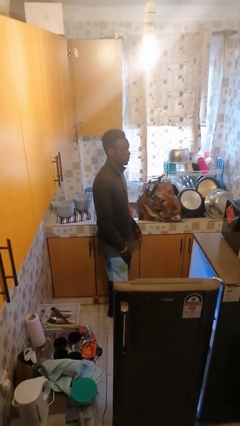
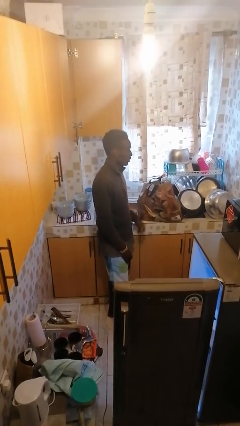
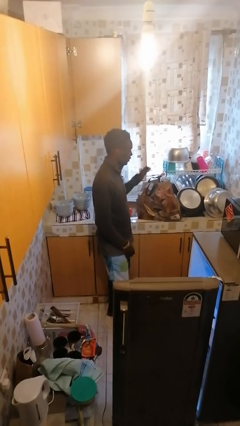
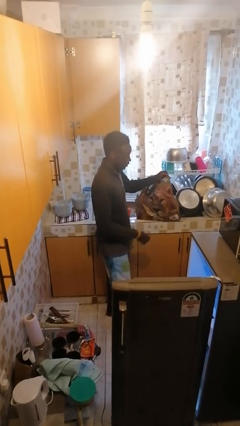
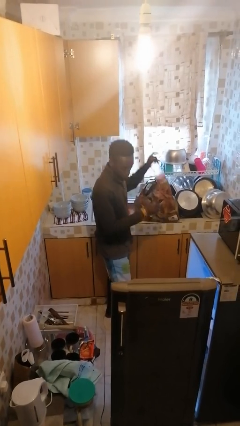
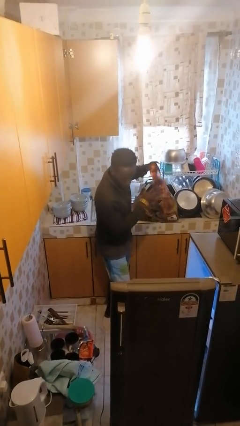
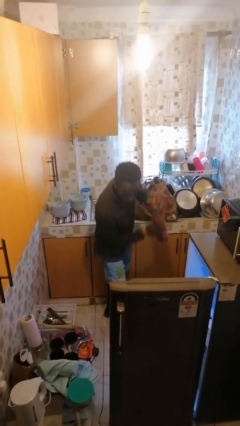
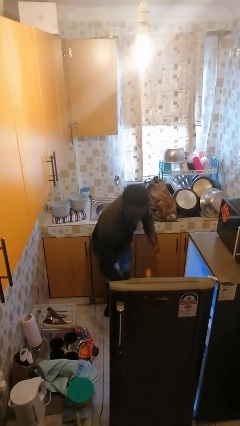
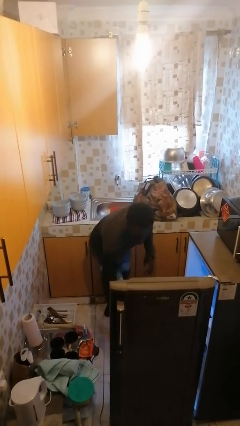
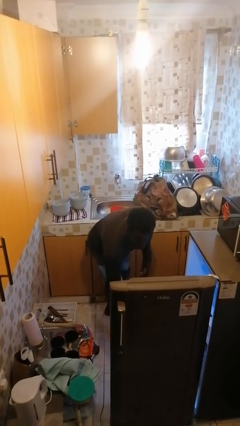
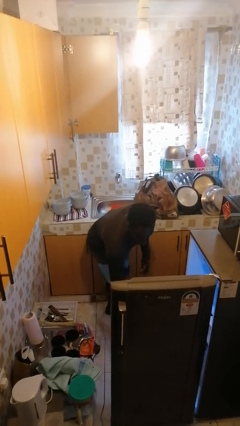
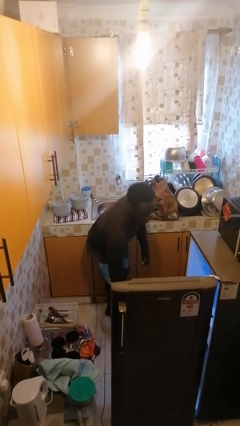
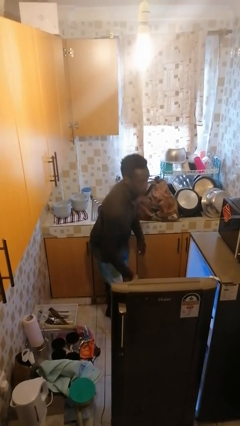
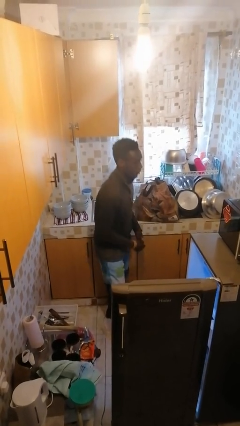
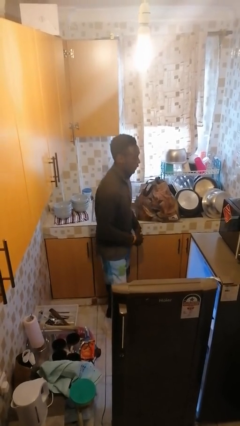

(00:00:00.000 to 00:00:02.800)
person loads groceries into refrigerator

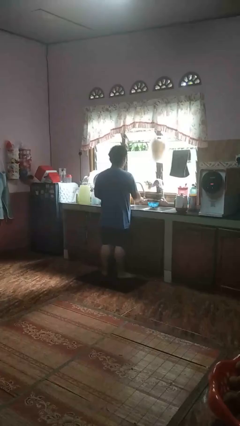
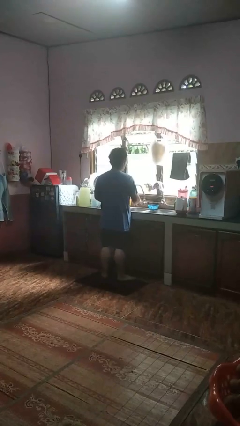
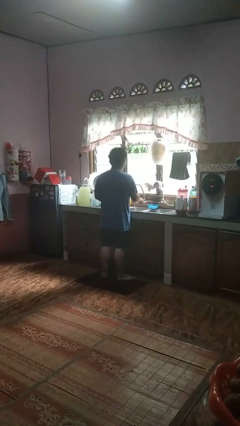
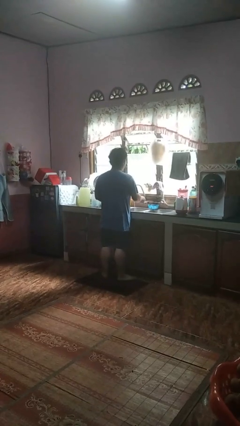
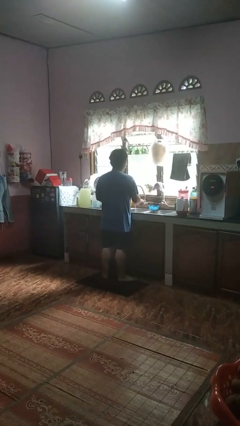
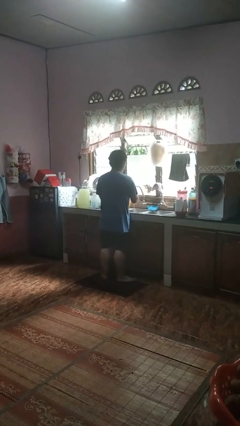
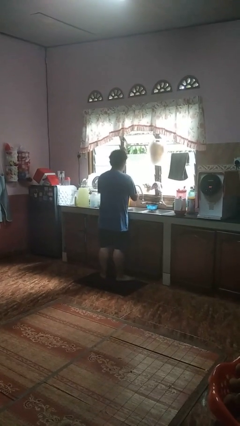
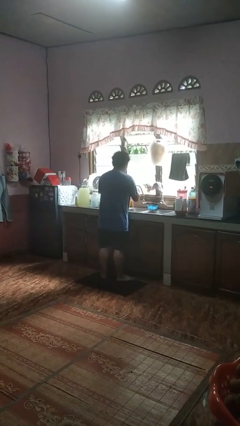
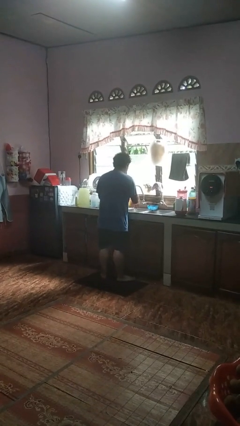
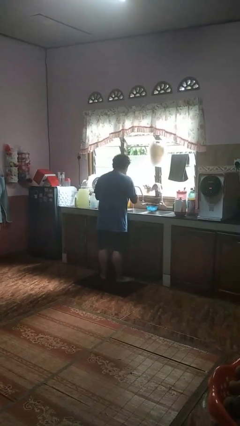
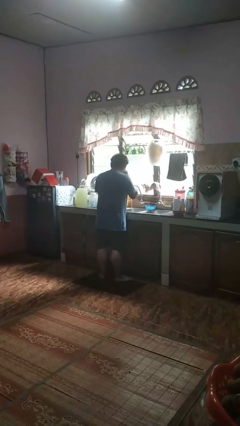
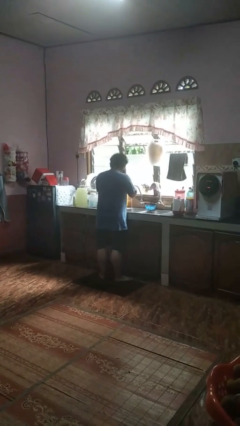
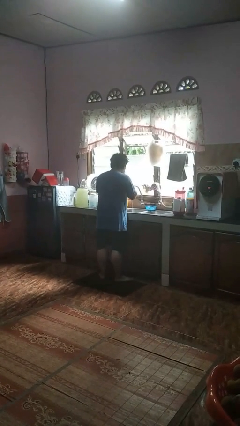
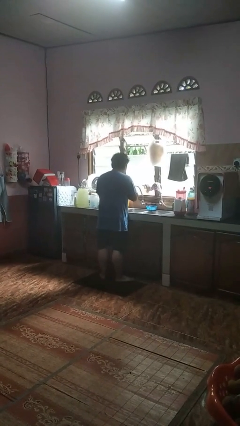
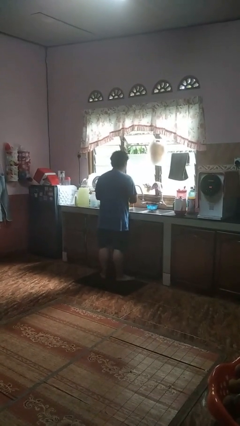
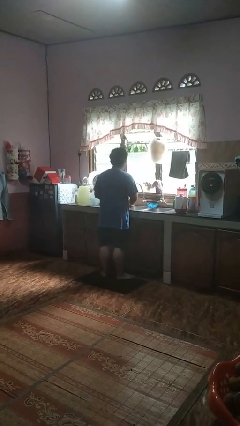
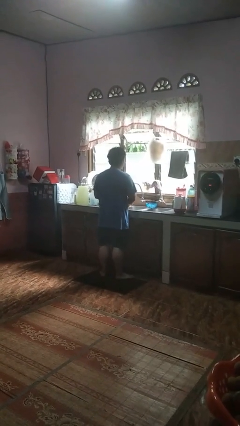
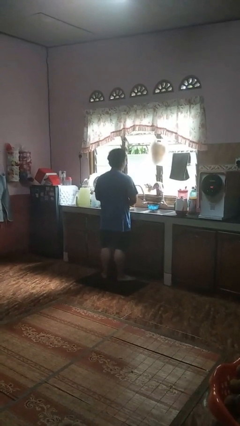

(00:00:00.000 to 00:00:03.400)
person washes face

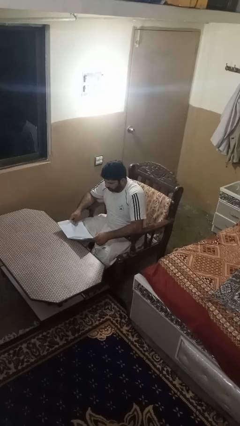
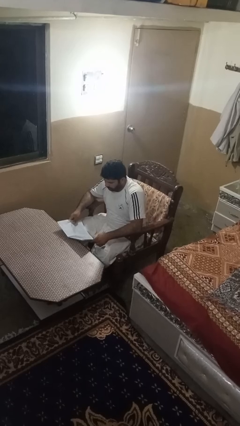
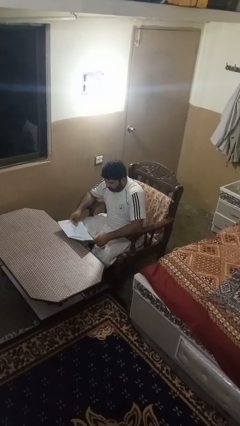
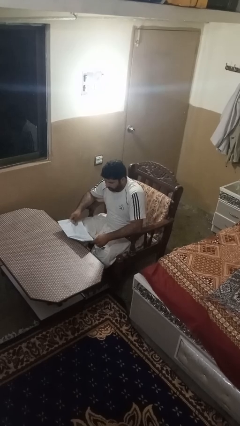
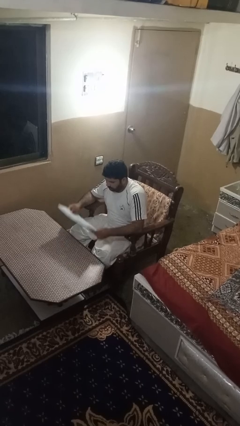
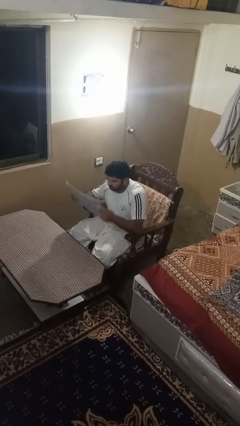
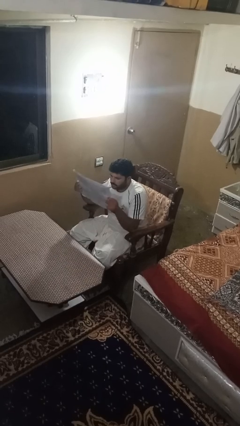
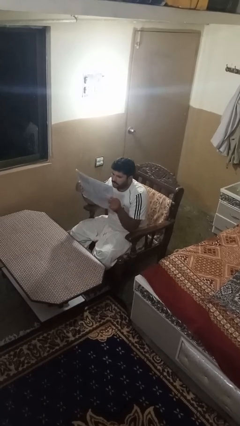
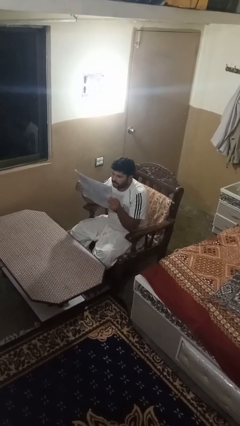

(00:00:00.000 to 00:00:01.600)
person reads newspaper

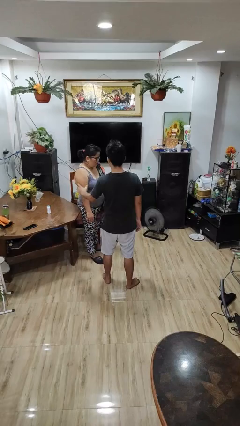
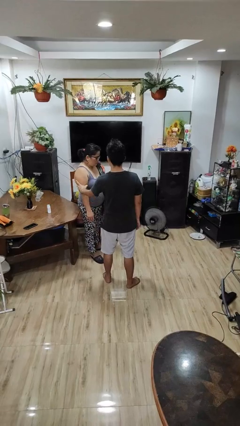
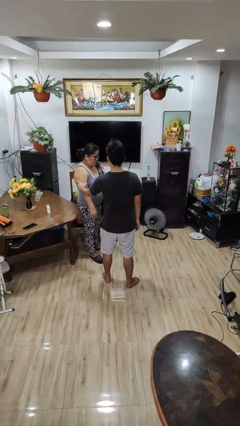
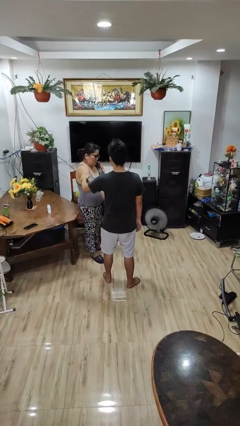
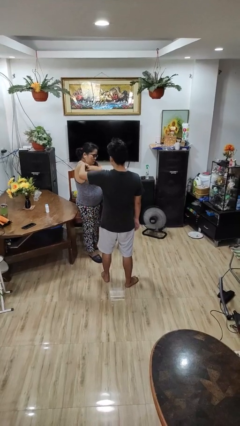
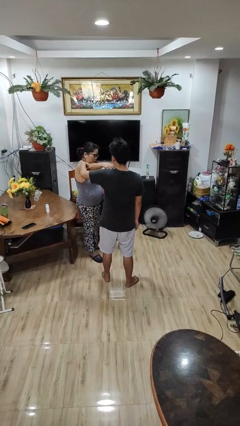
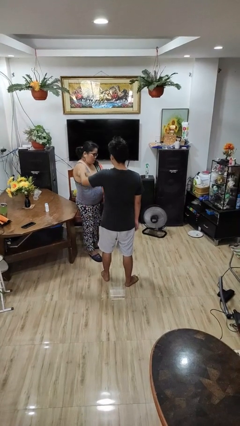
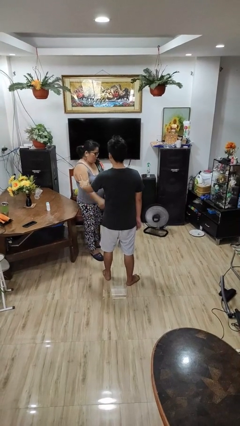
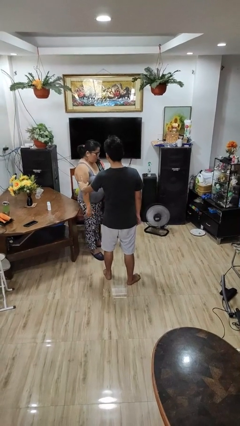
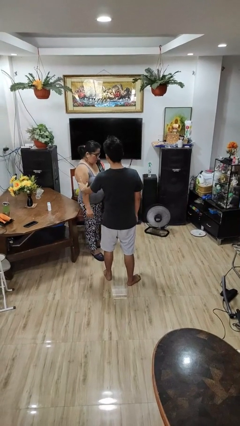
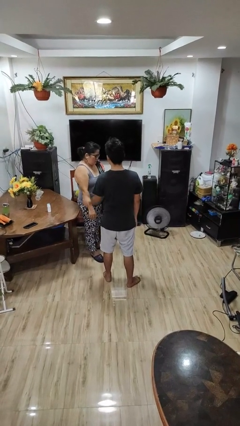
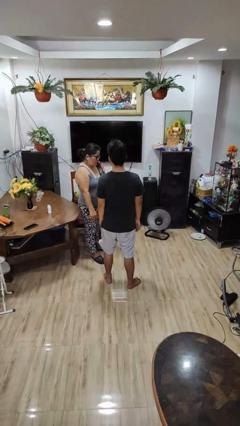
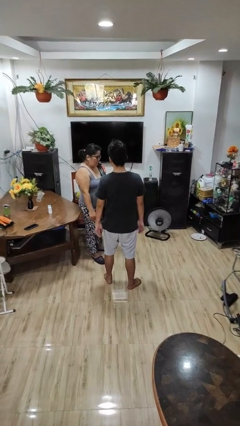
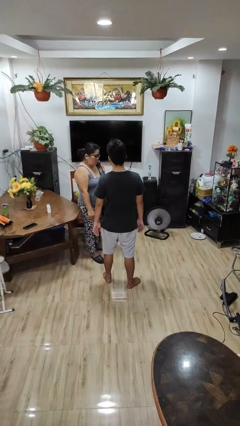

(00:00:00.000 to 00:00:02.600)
person grabs person by bicep

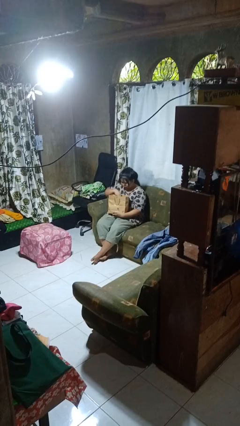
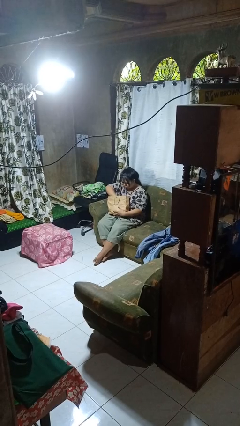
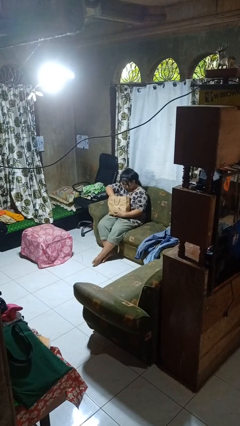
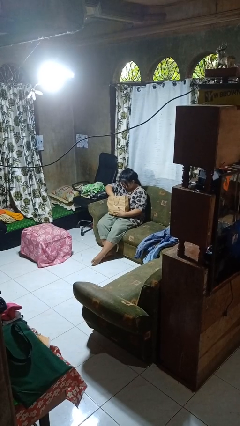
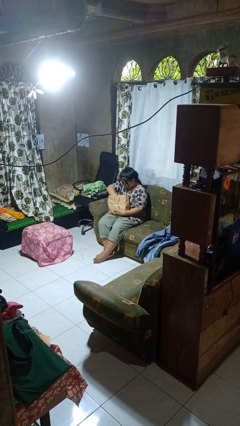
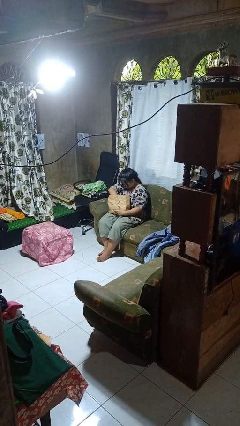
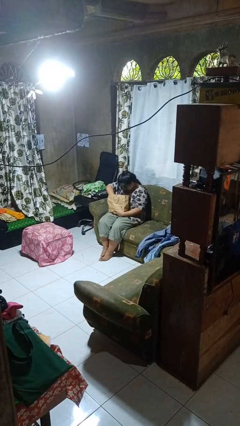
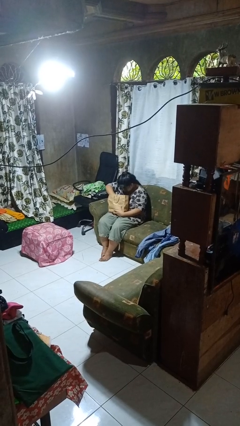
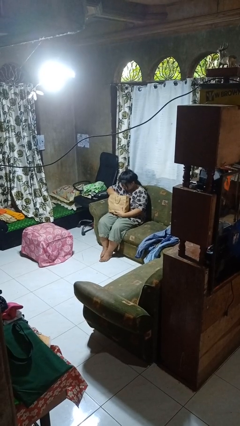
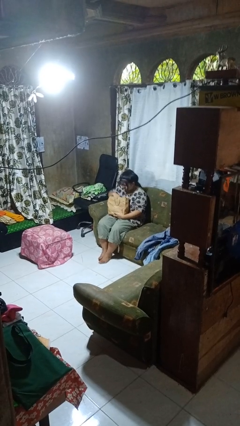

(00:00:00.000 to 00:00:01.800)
person searches in bag

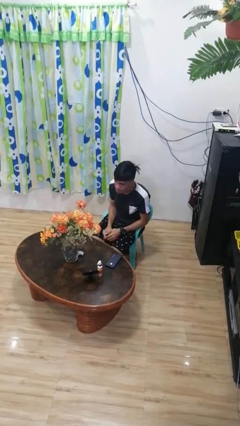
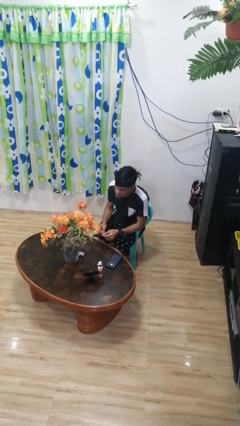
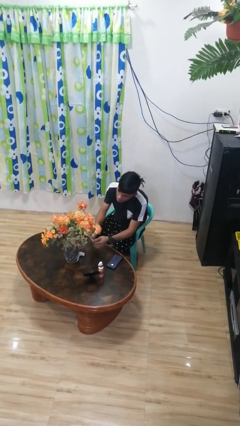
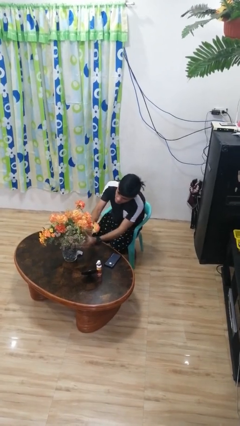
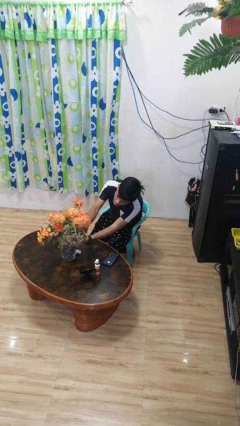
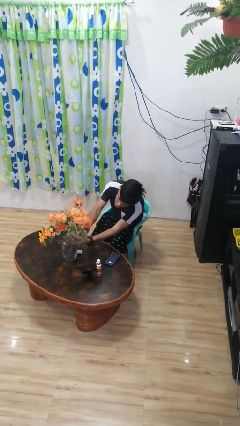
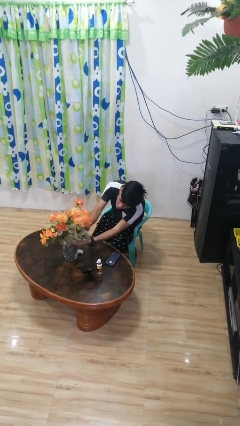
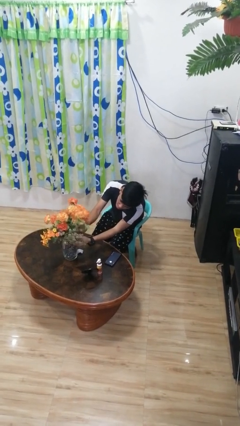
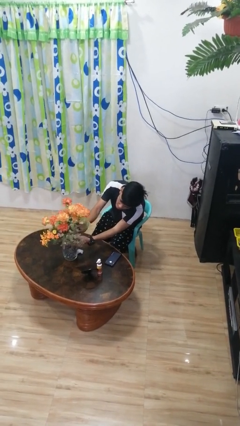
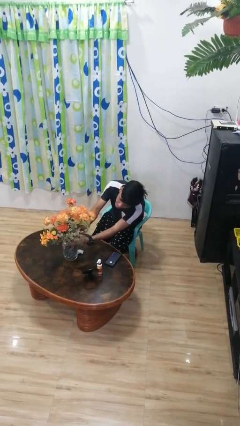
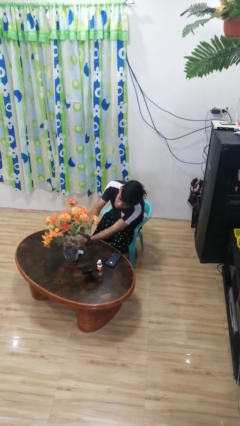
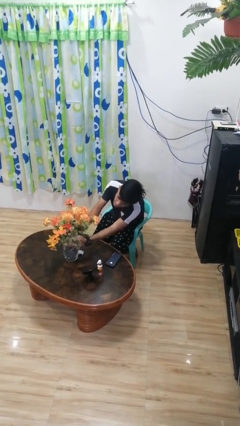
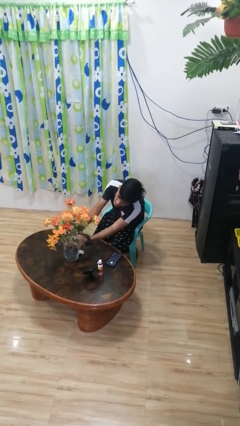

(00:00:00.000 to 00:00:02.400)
person arranges flowers in vase

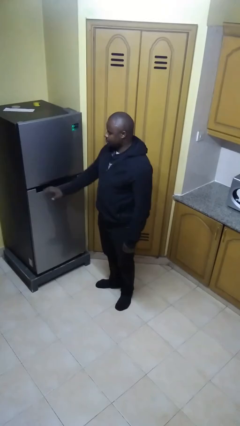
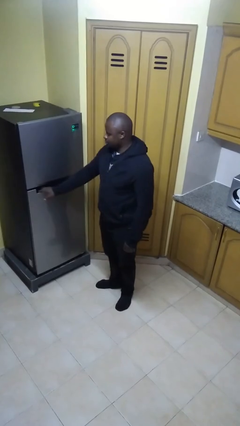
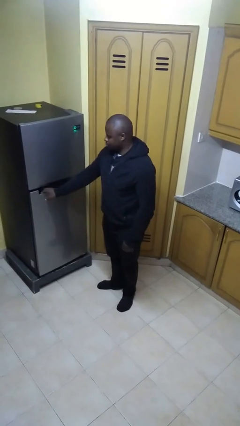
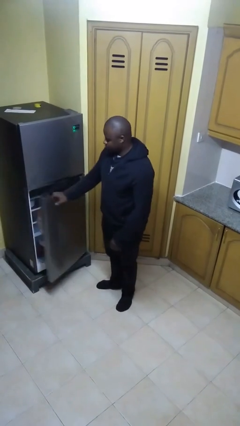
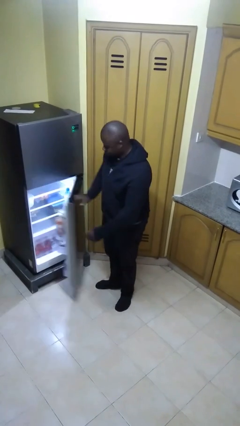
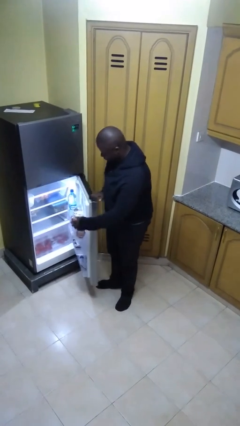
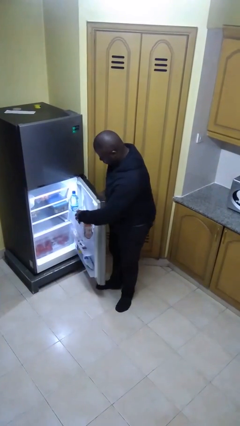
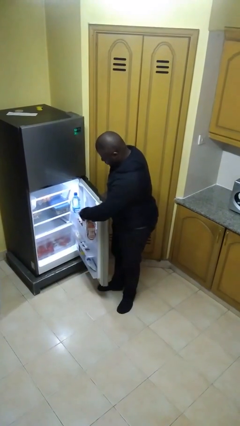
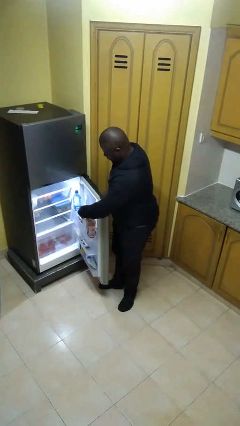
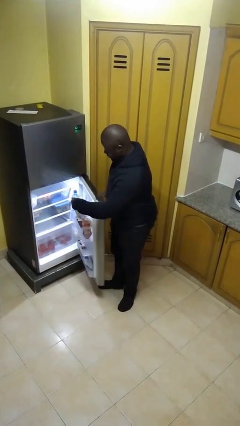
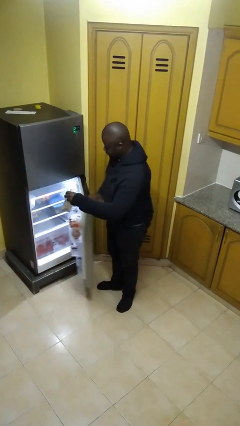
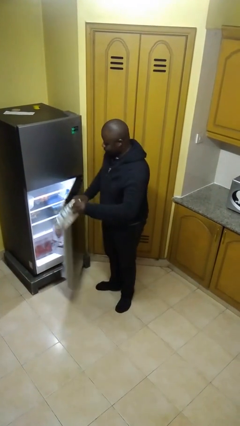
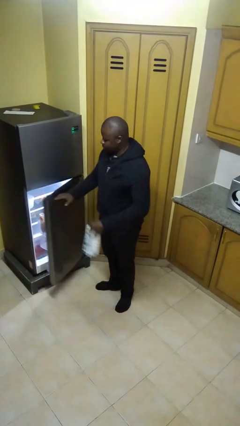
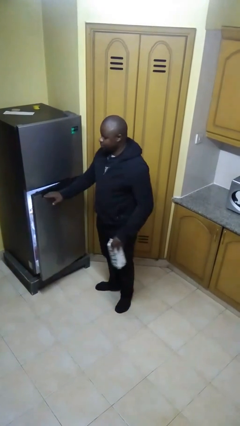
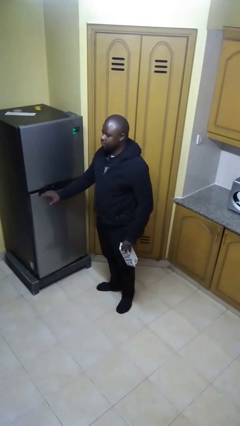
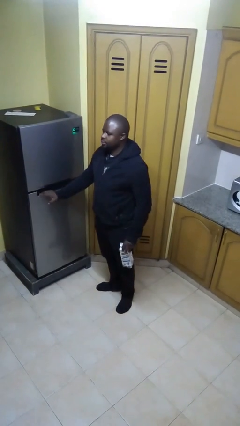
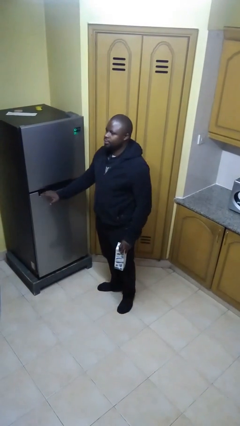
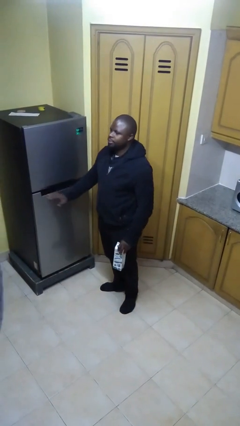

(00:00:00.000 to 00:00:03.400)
person takes object from refrigerator
